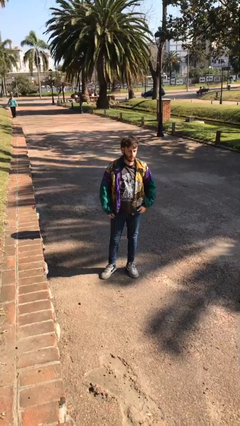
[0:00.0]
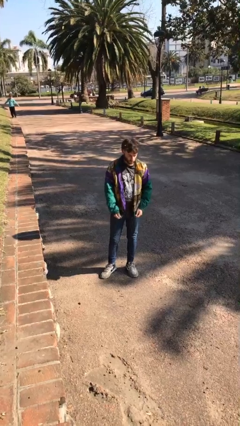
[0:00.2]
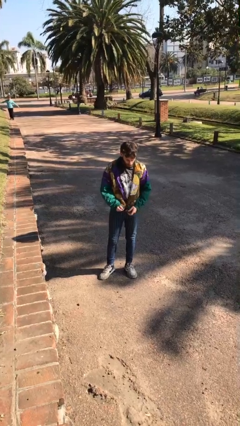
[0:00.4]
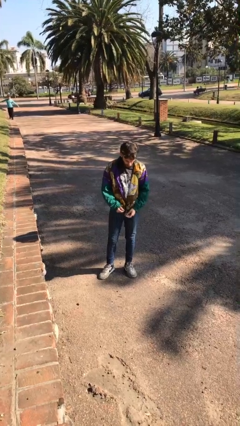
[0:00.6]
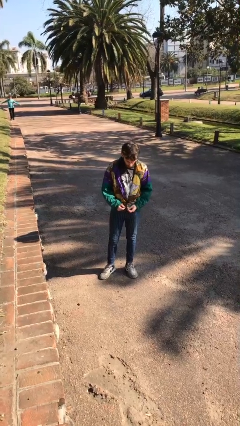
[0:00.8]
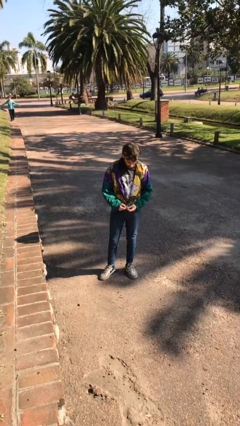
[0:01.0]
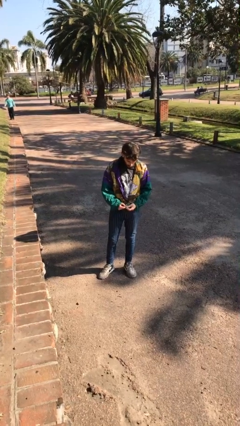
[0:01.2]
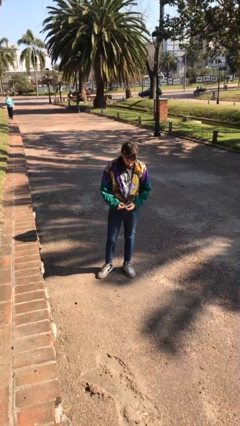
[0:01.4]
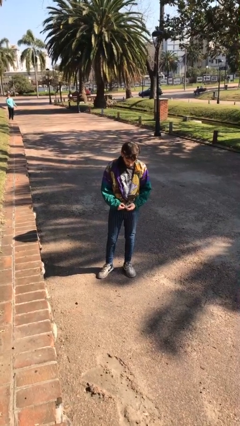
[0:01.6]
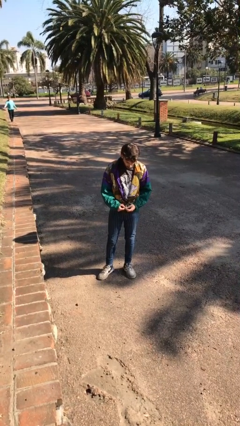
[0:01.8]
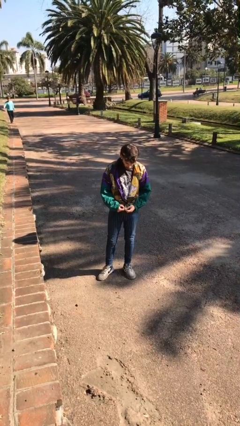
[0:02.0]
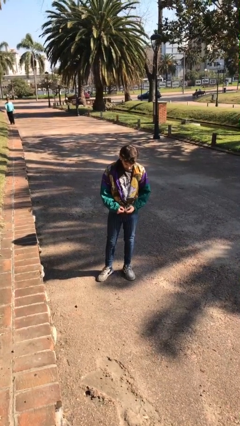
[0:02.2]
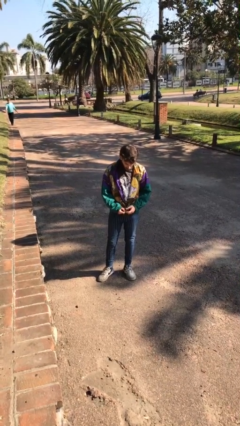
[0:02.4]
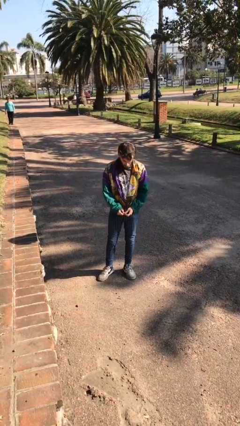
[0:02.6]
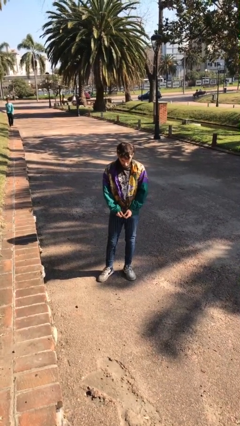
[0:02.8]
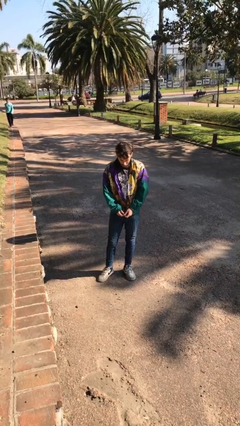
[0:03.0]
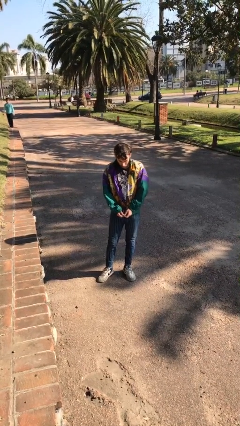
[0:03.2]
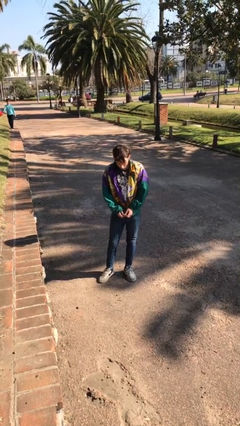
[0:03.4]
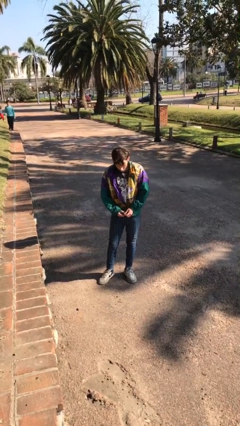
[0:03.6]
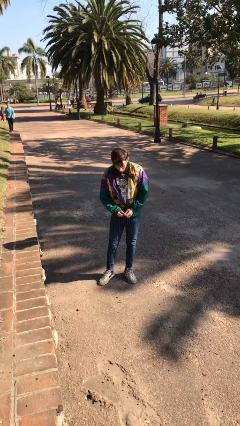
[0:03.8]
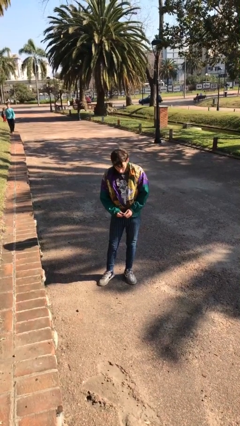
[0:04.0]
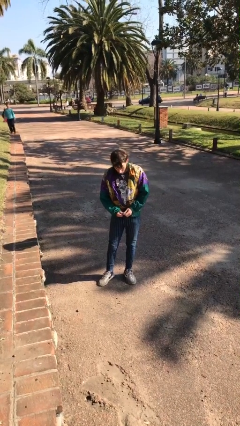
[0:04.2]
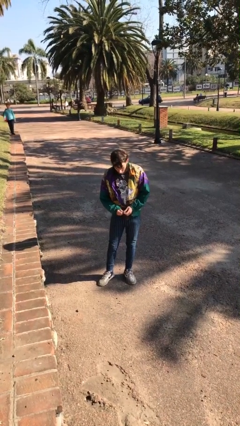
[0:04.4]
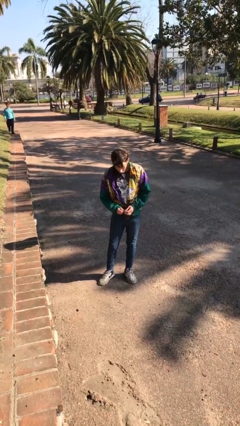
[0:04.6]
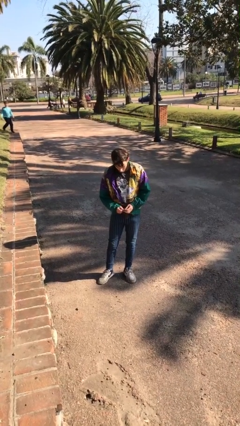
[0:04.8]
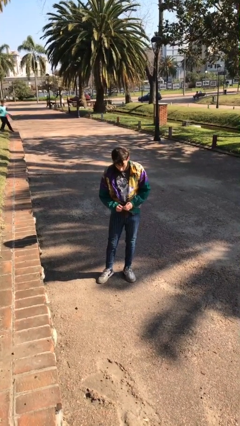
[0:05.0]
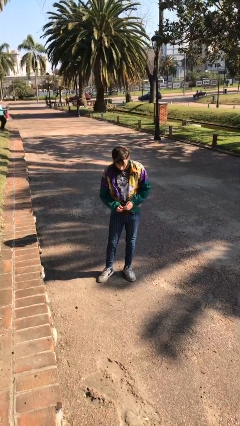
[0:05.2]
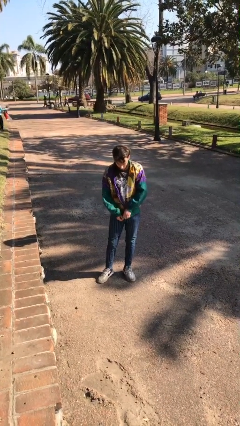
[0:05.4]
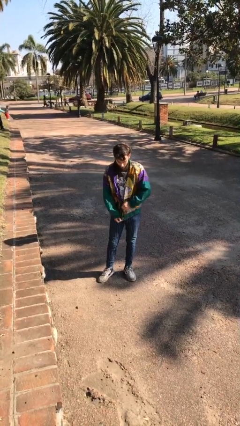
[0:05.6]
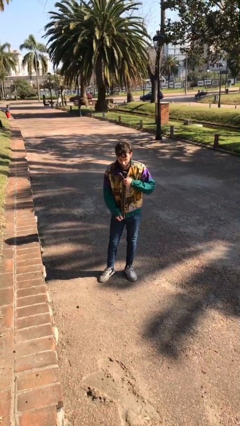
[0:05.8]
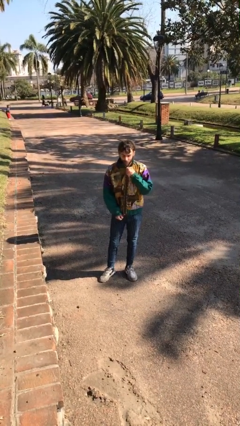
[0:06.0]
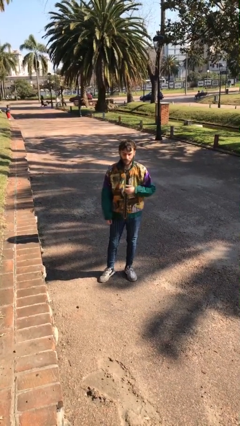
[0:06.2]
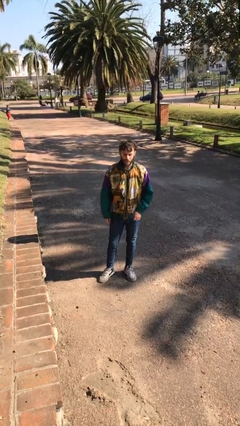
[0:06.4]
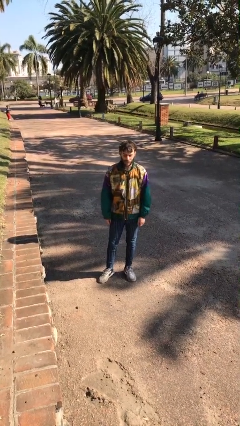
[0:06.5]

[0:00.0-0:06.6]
person zips up jacket

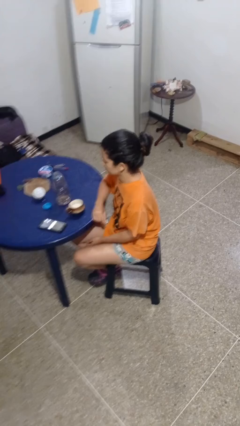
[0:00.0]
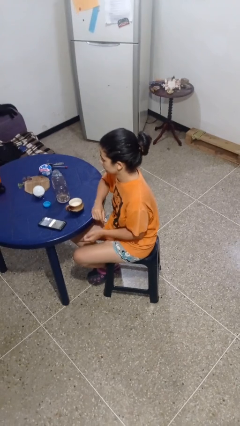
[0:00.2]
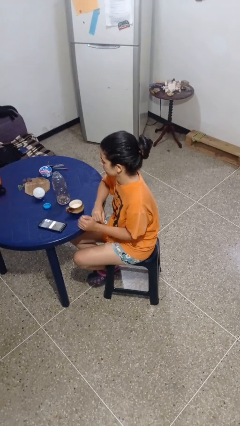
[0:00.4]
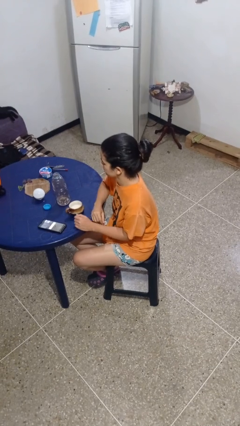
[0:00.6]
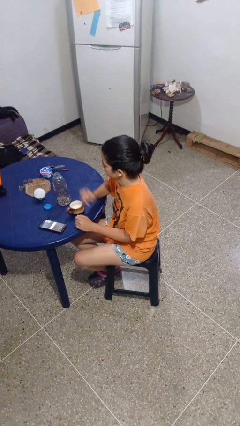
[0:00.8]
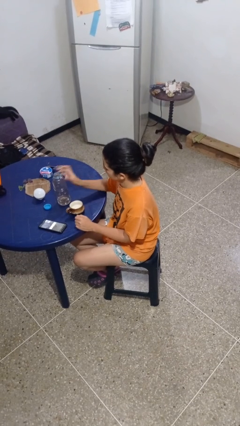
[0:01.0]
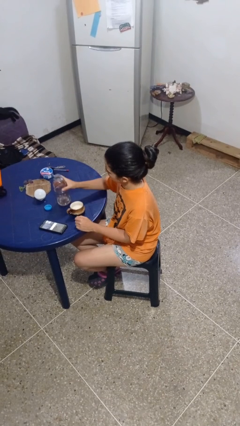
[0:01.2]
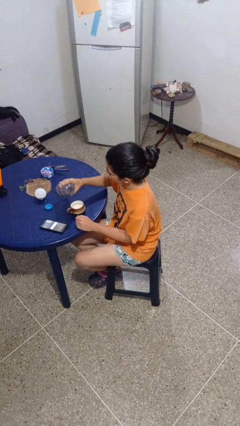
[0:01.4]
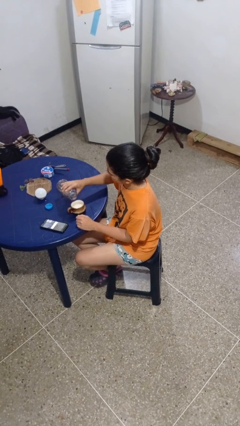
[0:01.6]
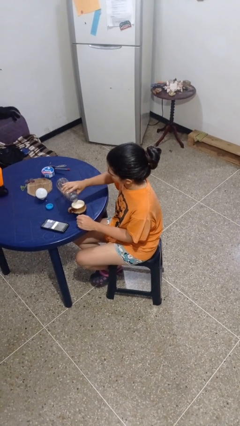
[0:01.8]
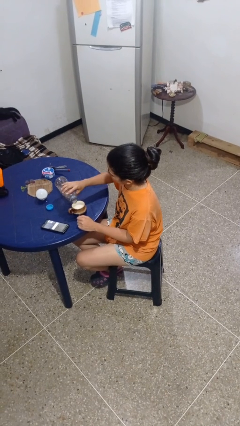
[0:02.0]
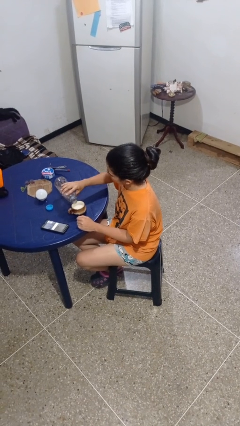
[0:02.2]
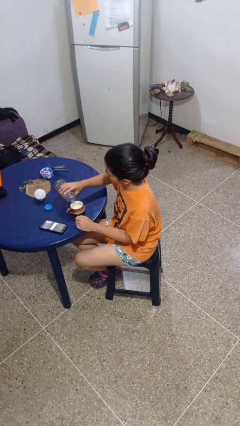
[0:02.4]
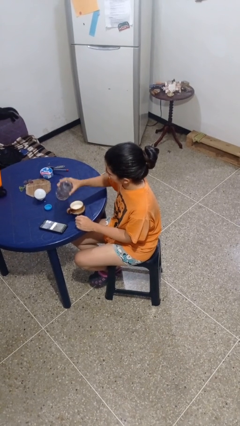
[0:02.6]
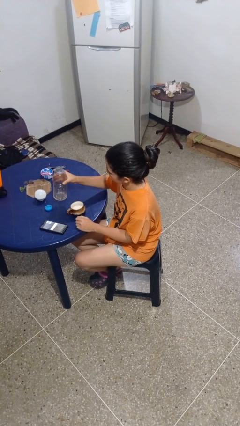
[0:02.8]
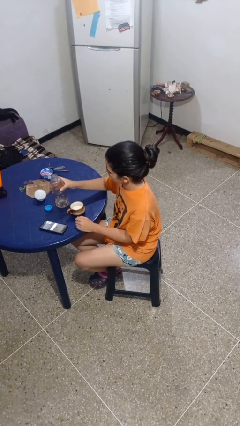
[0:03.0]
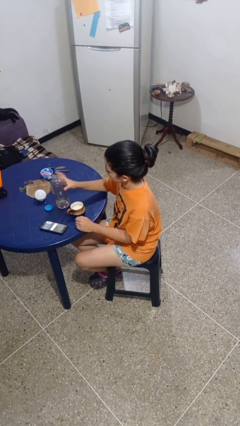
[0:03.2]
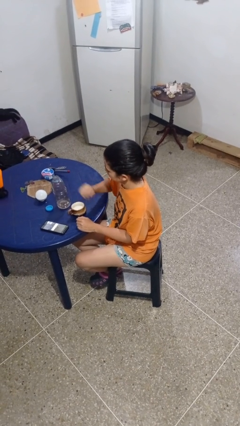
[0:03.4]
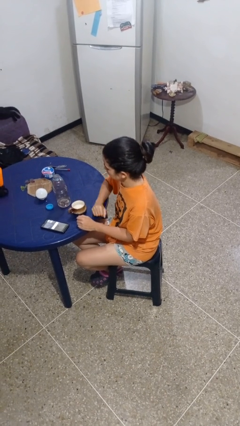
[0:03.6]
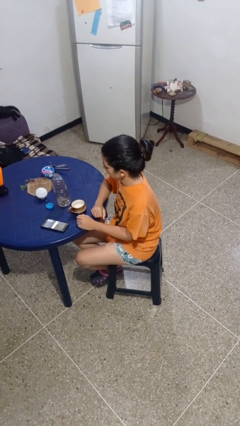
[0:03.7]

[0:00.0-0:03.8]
person pours liquid into cup

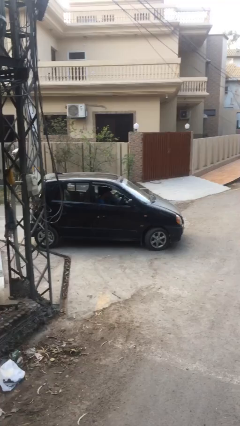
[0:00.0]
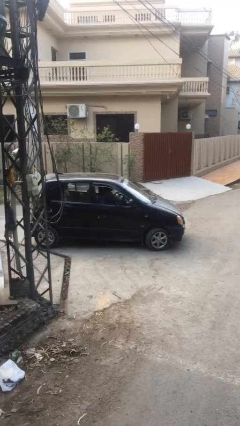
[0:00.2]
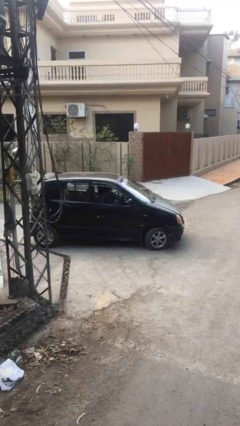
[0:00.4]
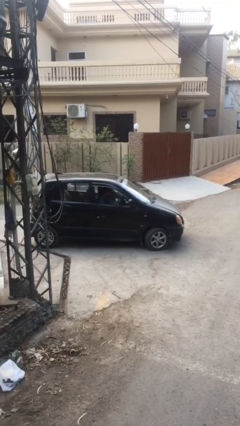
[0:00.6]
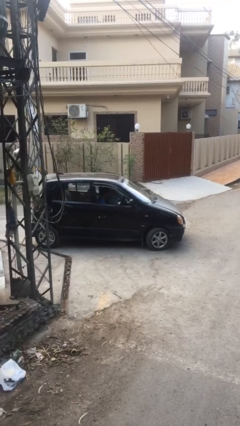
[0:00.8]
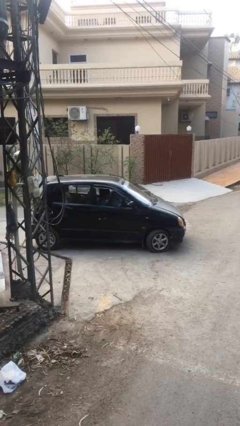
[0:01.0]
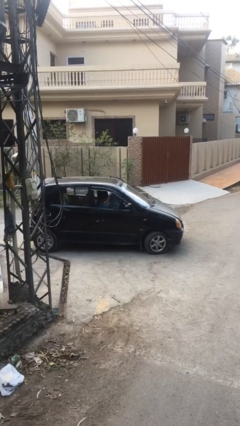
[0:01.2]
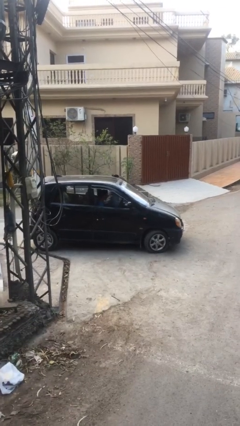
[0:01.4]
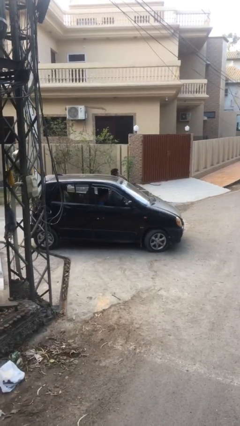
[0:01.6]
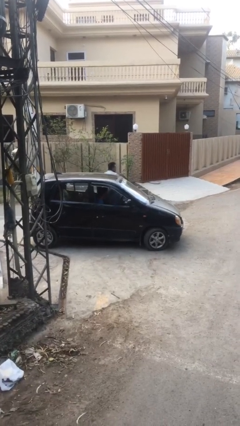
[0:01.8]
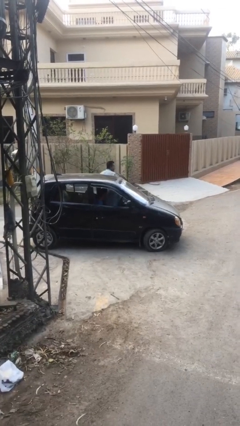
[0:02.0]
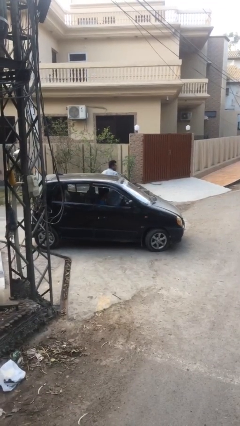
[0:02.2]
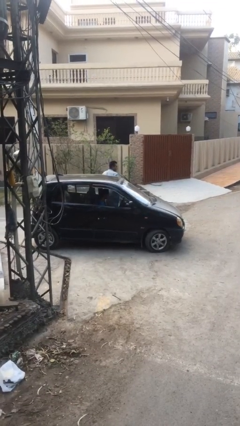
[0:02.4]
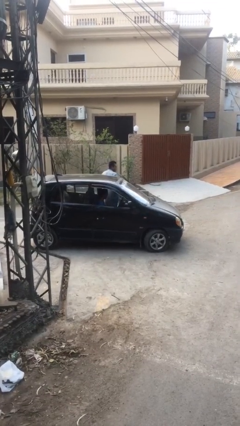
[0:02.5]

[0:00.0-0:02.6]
car drops off person

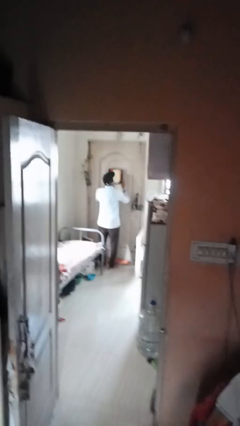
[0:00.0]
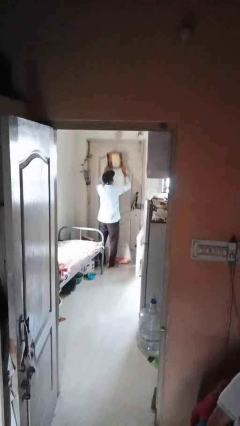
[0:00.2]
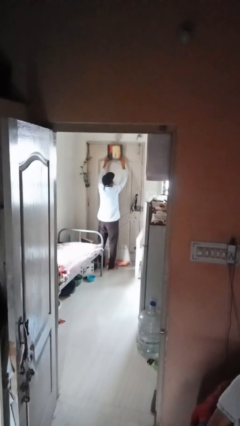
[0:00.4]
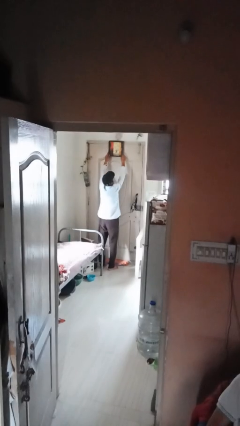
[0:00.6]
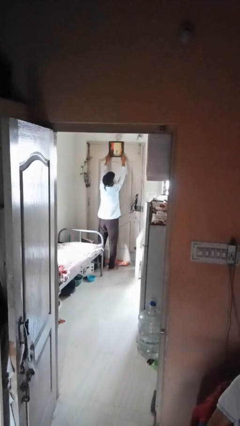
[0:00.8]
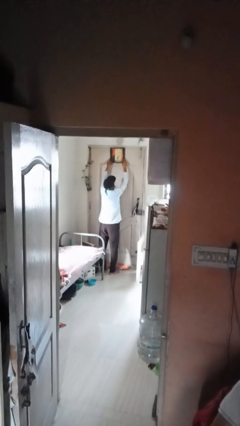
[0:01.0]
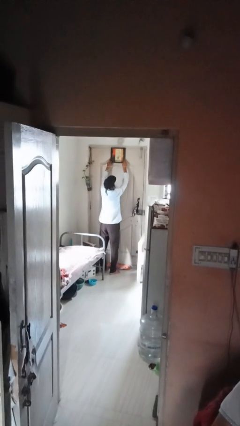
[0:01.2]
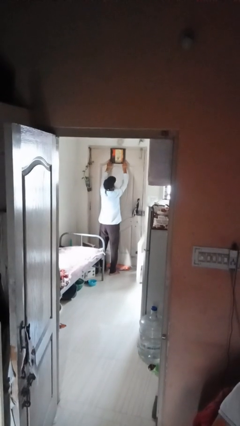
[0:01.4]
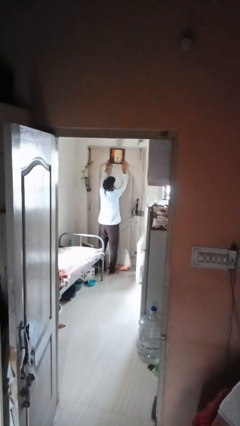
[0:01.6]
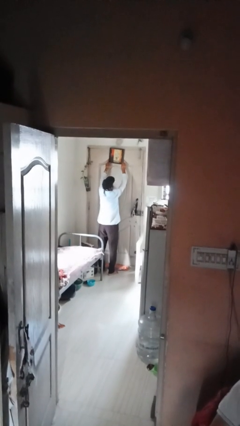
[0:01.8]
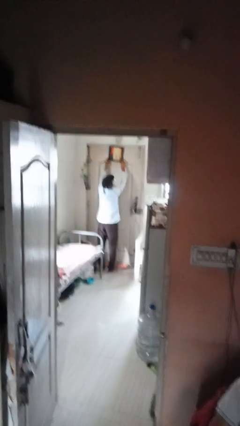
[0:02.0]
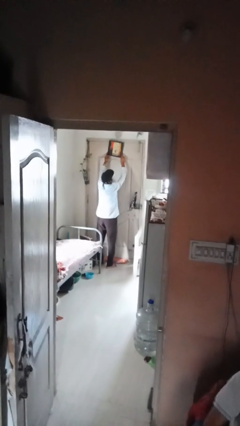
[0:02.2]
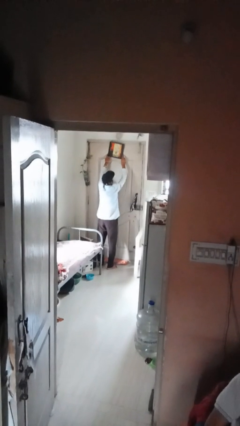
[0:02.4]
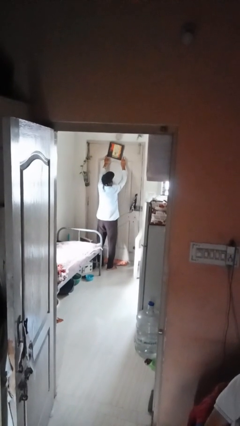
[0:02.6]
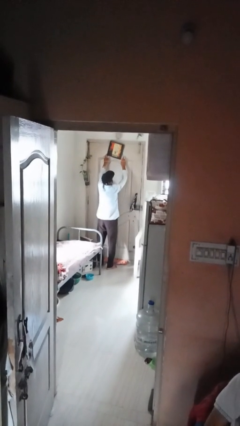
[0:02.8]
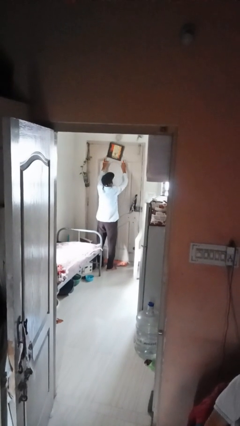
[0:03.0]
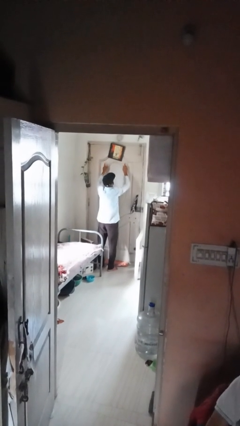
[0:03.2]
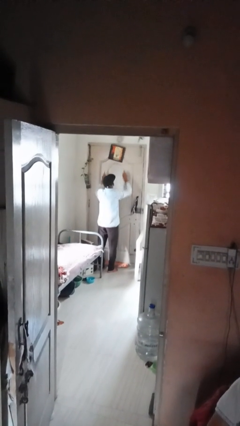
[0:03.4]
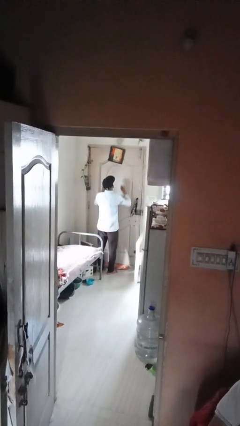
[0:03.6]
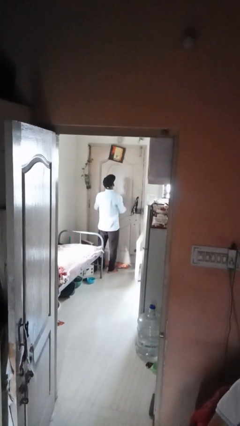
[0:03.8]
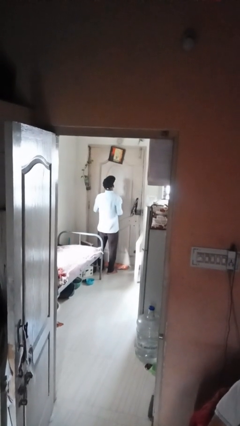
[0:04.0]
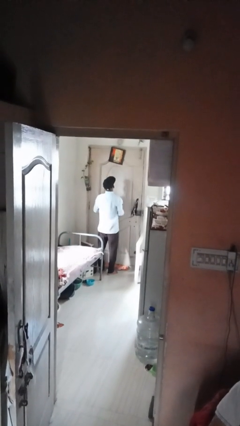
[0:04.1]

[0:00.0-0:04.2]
person puts up picture frame

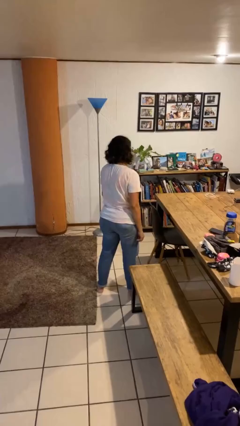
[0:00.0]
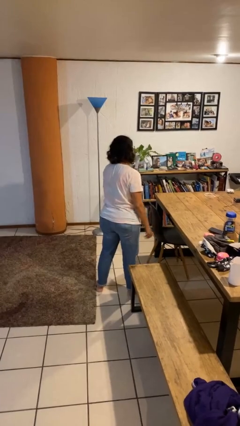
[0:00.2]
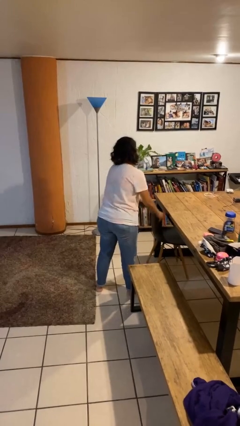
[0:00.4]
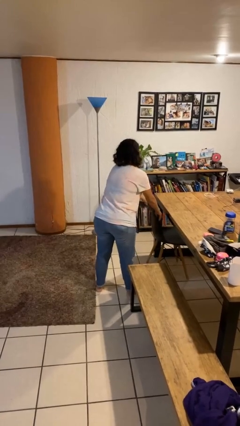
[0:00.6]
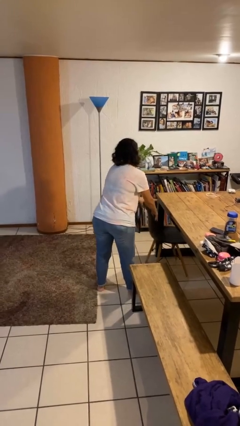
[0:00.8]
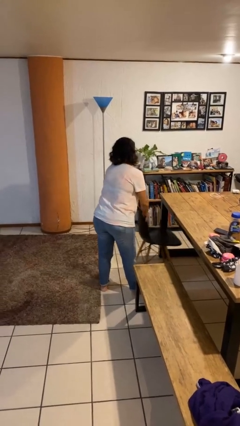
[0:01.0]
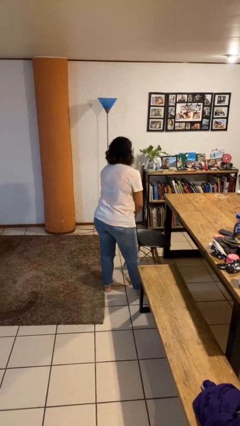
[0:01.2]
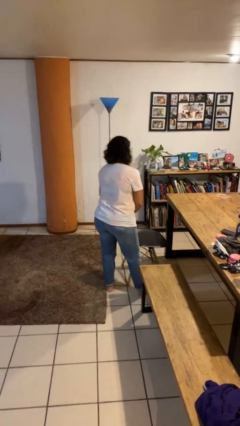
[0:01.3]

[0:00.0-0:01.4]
person pulls out chair
